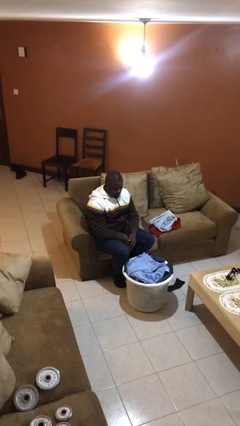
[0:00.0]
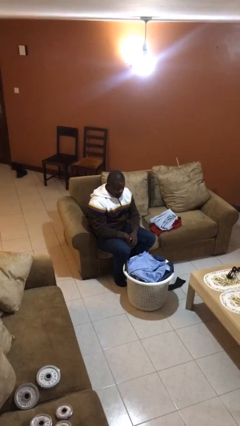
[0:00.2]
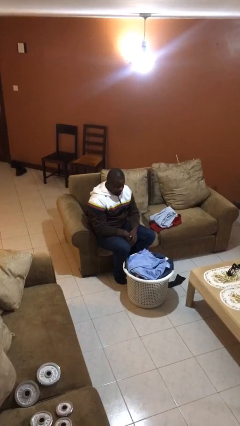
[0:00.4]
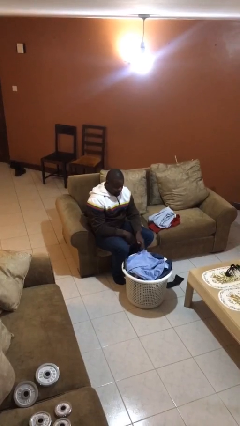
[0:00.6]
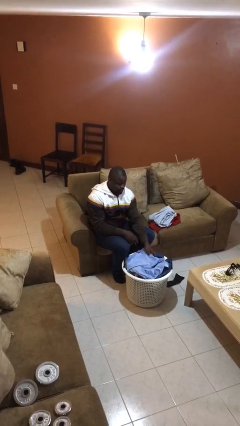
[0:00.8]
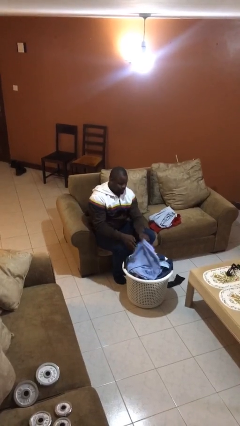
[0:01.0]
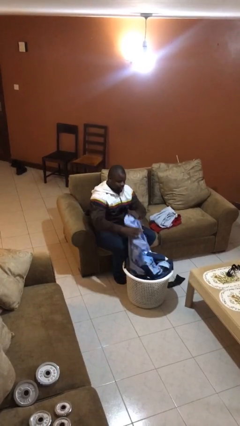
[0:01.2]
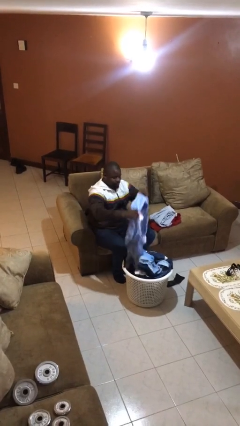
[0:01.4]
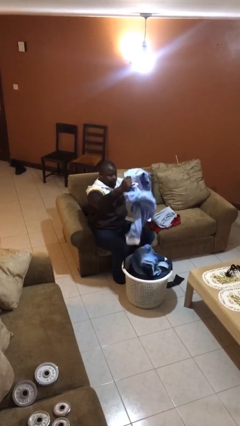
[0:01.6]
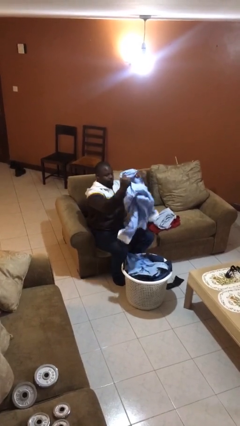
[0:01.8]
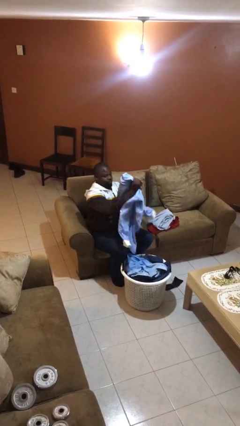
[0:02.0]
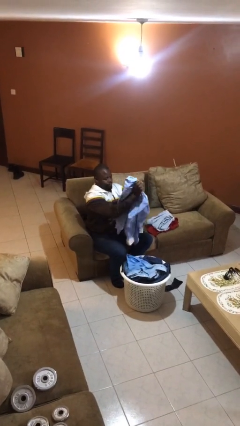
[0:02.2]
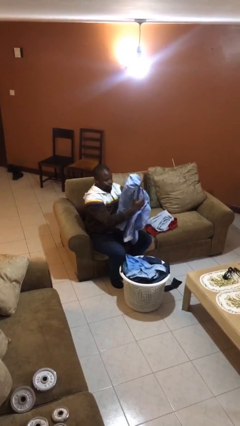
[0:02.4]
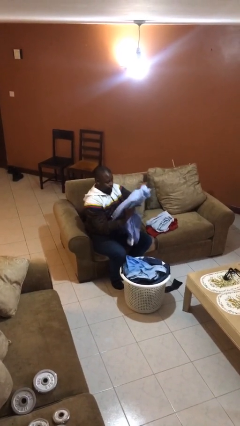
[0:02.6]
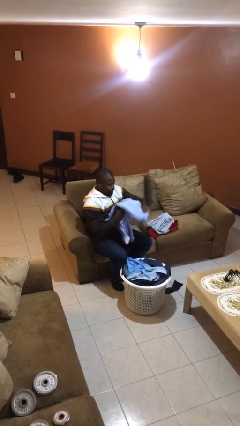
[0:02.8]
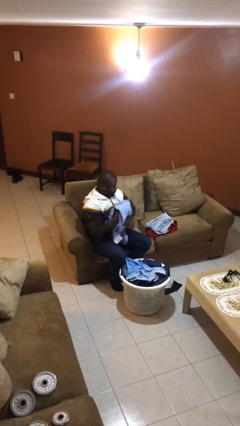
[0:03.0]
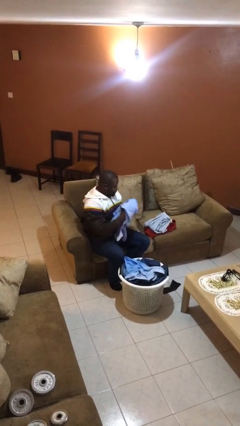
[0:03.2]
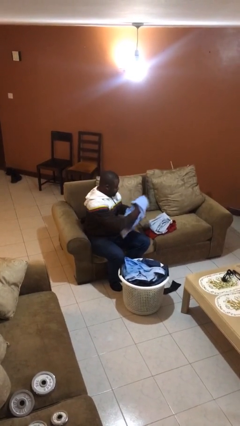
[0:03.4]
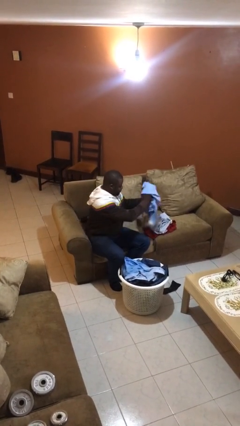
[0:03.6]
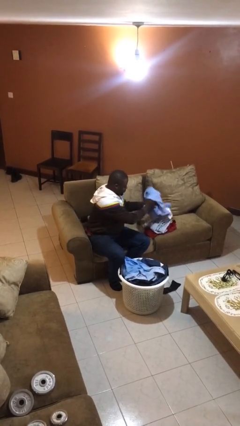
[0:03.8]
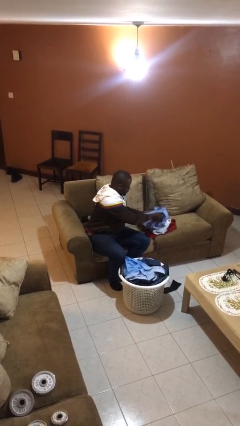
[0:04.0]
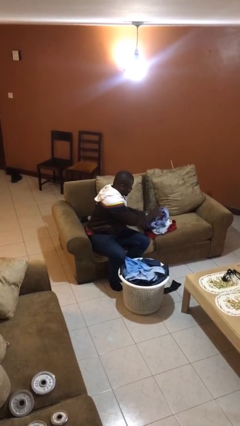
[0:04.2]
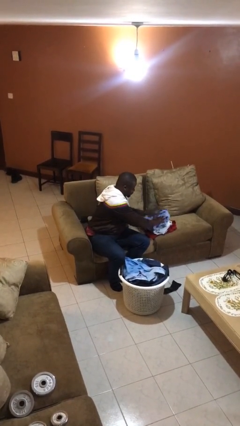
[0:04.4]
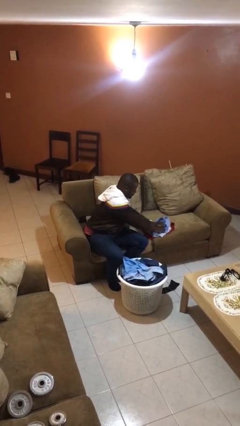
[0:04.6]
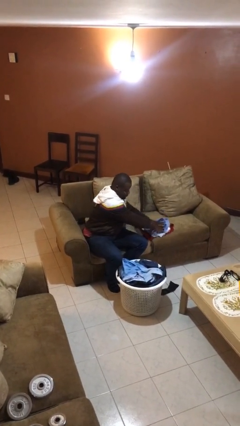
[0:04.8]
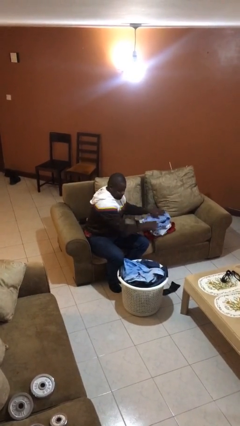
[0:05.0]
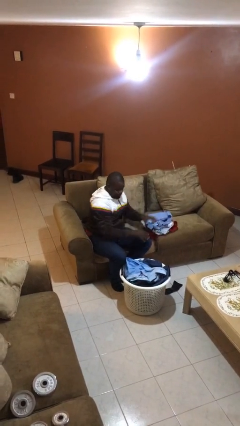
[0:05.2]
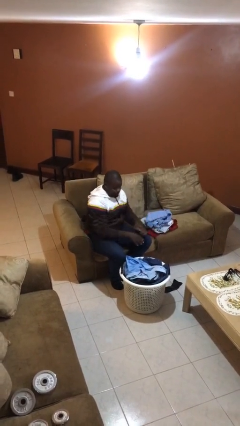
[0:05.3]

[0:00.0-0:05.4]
person folds shirt

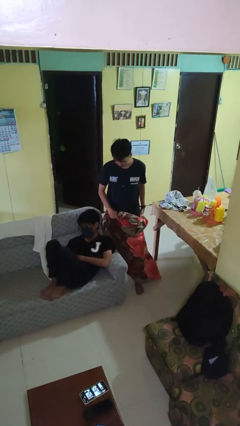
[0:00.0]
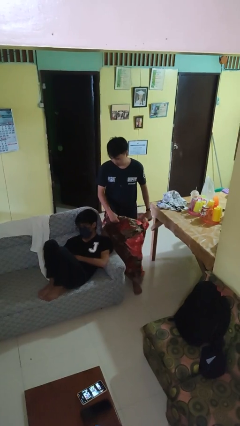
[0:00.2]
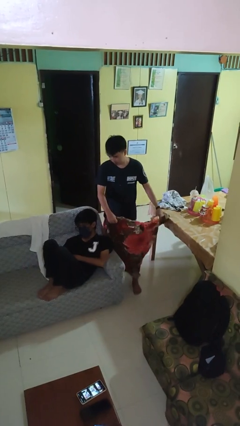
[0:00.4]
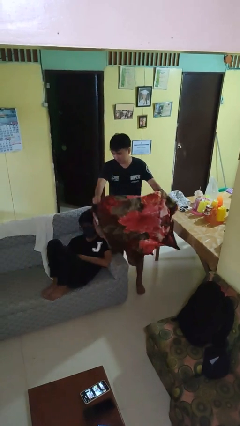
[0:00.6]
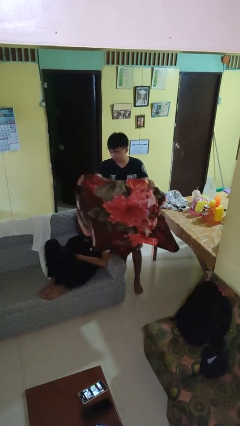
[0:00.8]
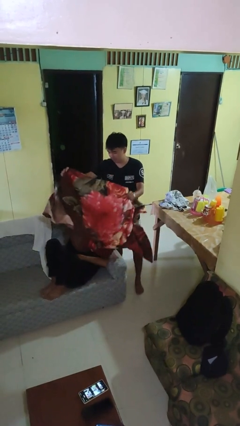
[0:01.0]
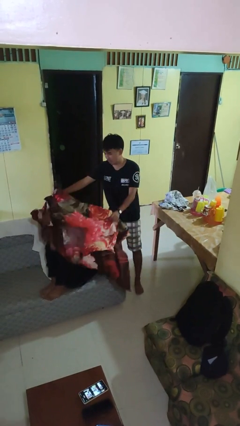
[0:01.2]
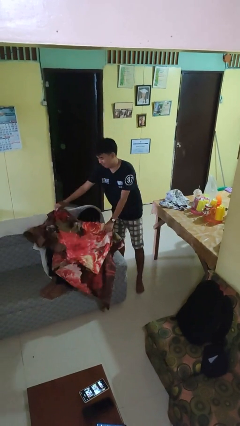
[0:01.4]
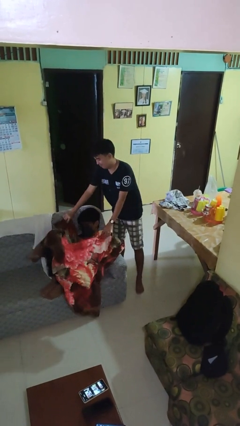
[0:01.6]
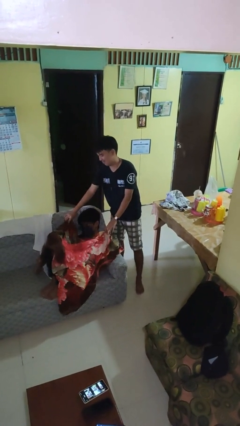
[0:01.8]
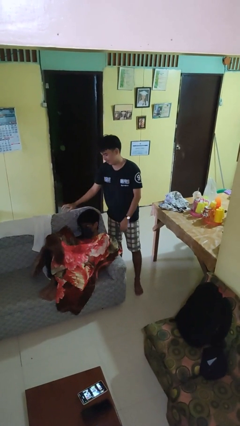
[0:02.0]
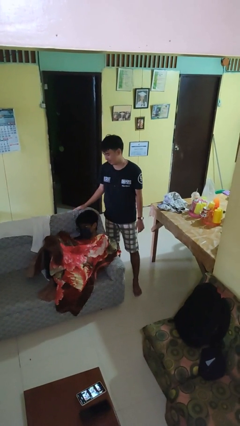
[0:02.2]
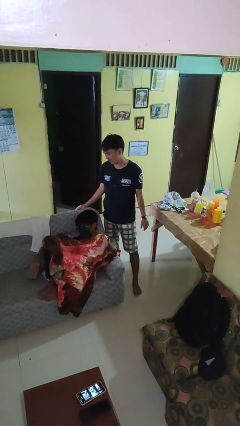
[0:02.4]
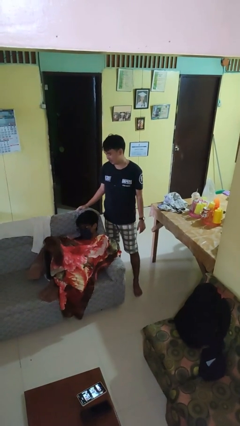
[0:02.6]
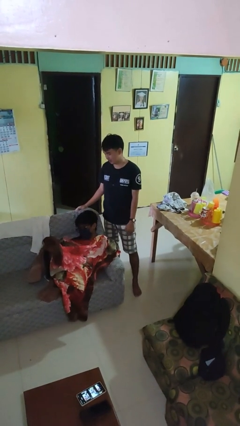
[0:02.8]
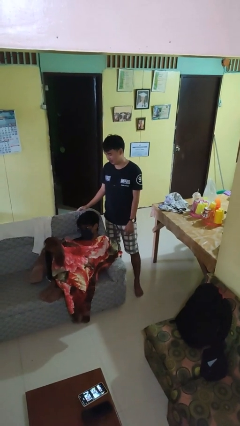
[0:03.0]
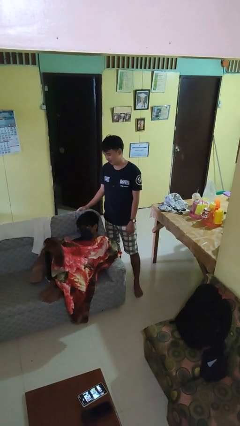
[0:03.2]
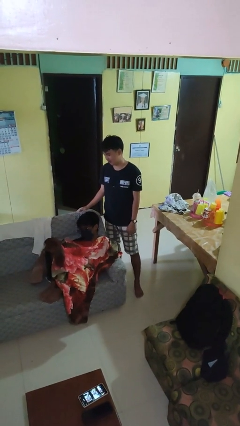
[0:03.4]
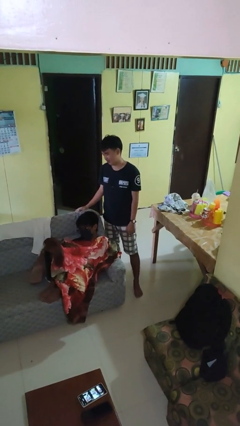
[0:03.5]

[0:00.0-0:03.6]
person covers friend with blanket

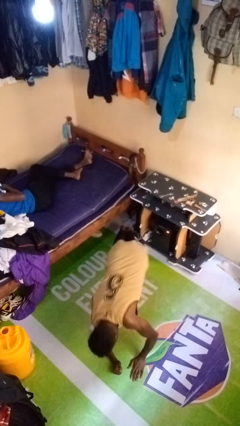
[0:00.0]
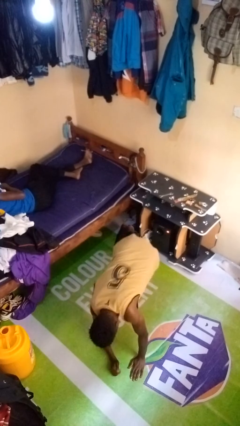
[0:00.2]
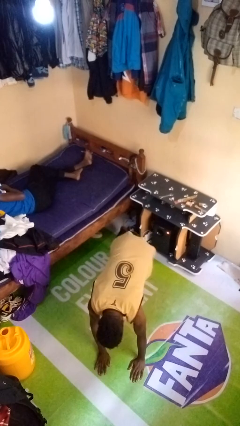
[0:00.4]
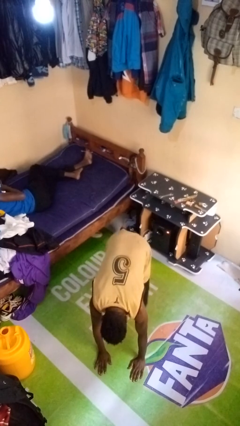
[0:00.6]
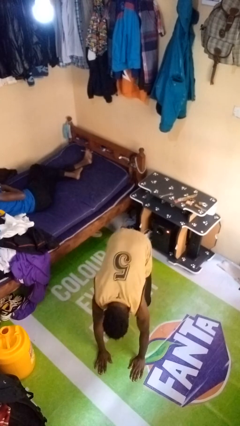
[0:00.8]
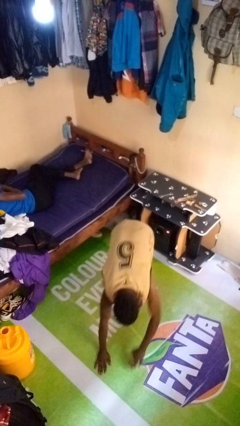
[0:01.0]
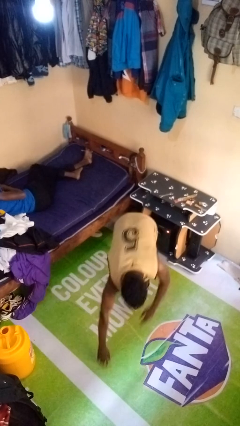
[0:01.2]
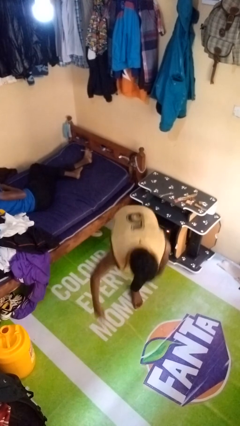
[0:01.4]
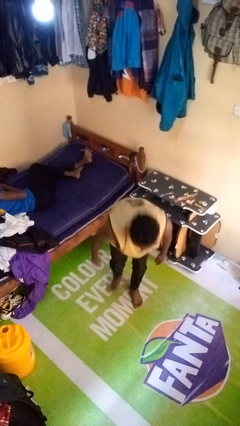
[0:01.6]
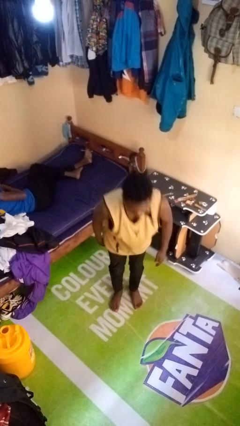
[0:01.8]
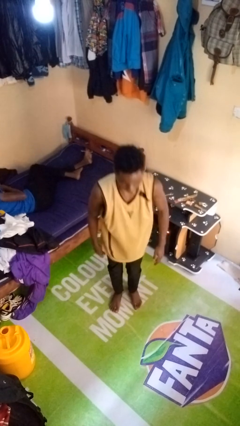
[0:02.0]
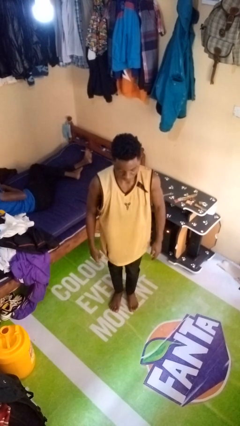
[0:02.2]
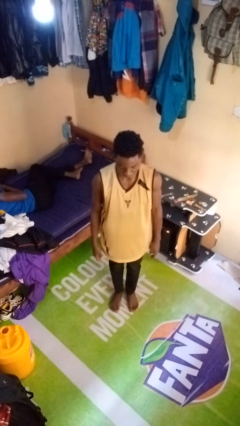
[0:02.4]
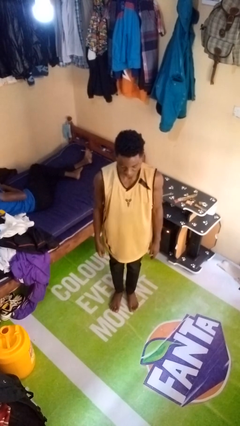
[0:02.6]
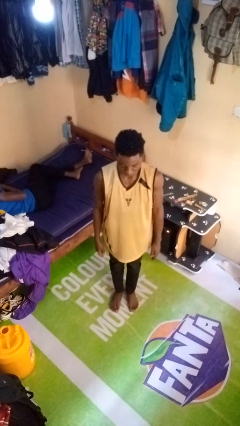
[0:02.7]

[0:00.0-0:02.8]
person stands up from floor

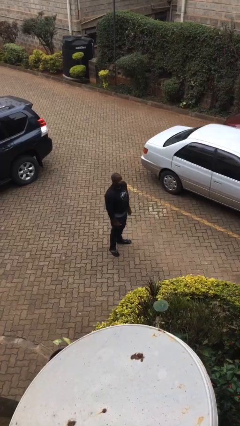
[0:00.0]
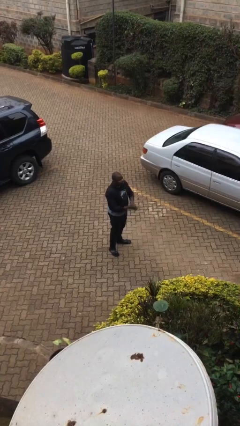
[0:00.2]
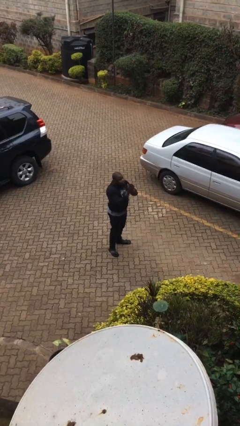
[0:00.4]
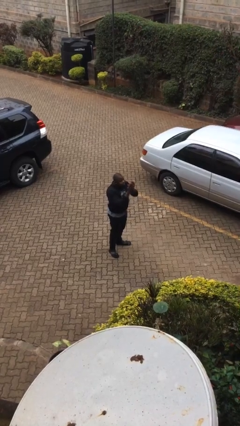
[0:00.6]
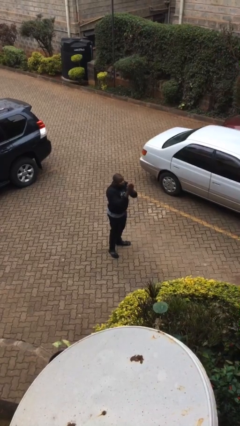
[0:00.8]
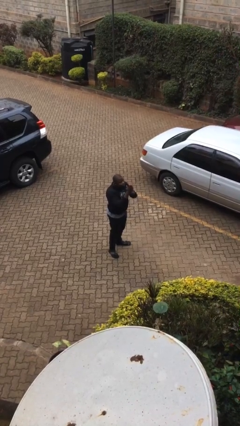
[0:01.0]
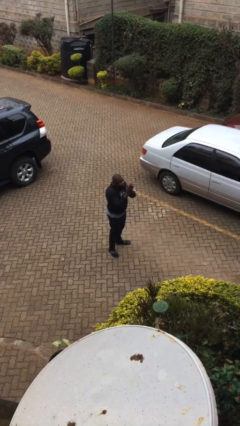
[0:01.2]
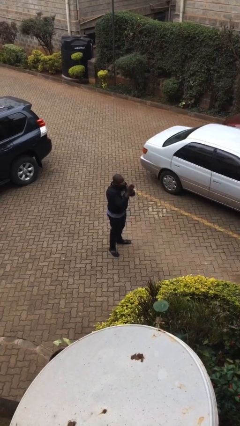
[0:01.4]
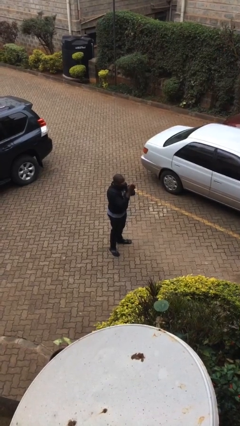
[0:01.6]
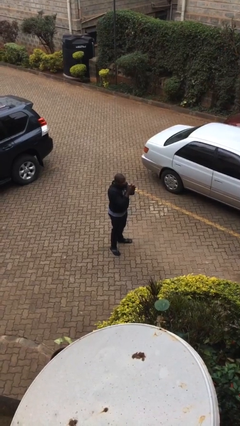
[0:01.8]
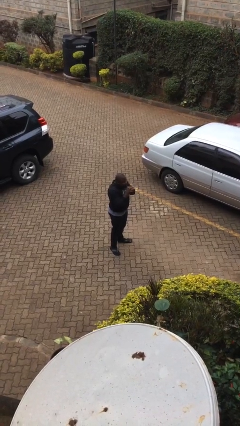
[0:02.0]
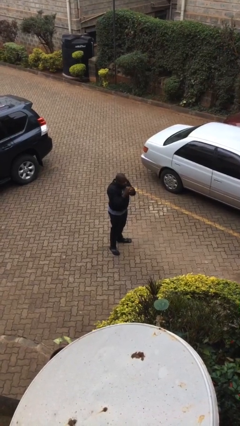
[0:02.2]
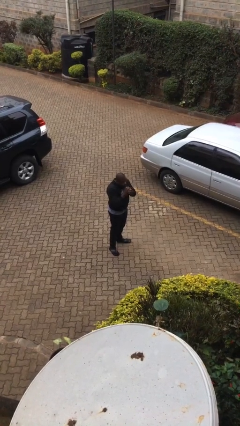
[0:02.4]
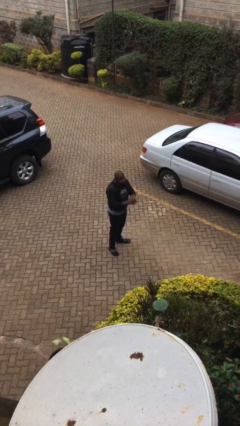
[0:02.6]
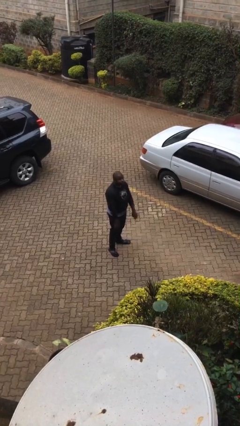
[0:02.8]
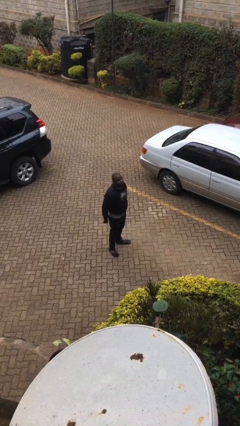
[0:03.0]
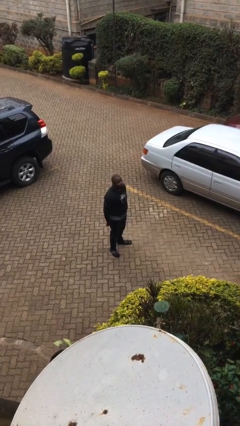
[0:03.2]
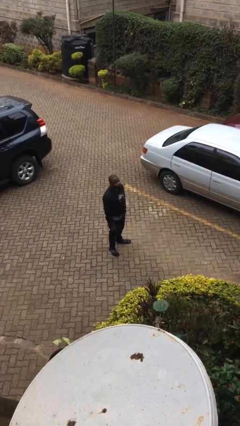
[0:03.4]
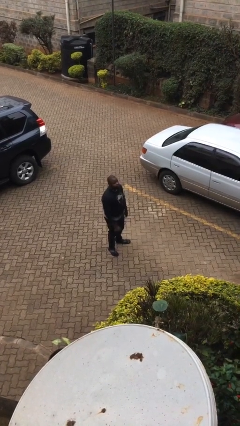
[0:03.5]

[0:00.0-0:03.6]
person blows into hands

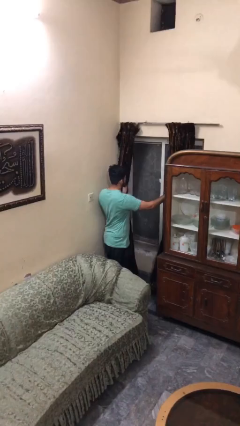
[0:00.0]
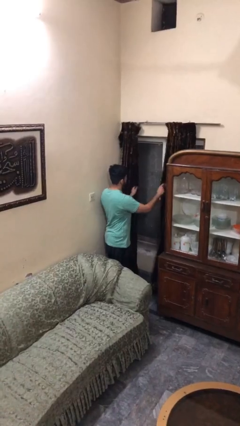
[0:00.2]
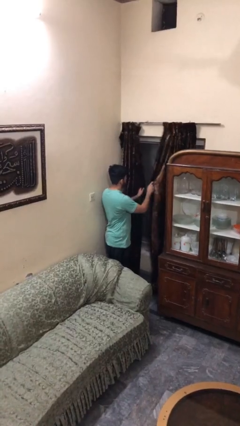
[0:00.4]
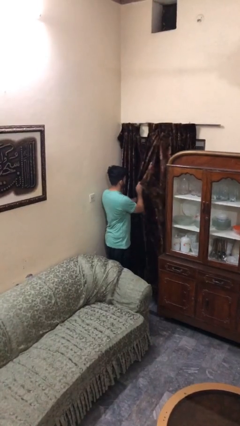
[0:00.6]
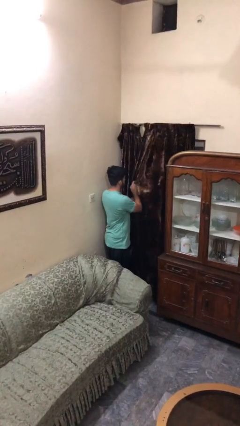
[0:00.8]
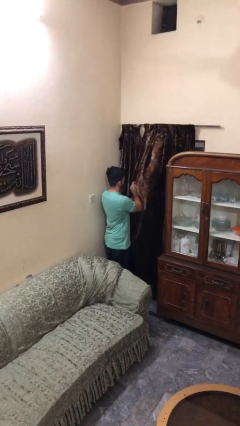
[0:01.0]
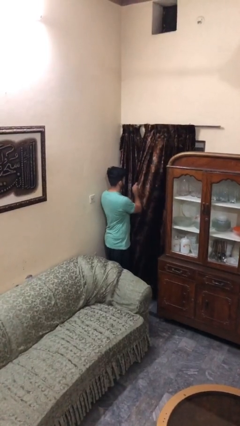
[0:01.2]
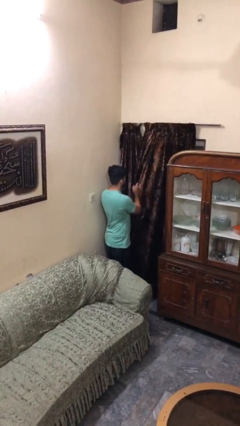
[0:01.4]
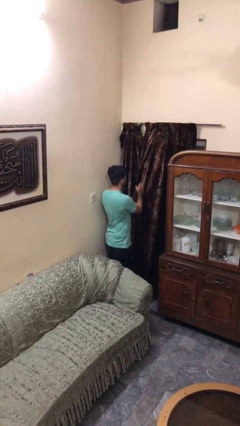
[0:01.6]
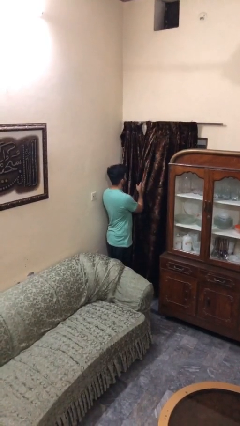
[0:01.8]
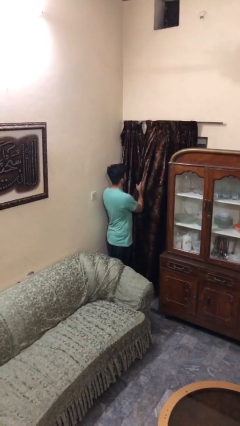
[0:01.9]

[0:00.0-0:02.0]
person closes curtains
